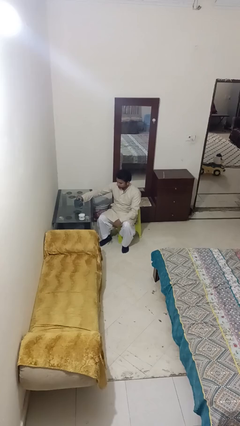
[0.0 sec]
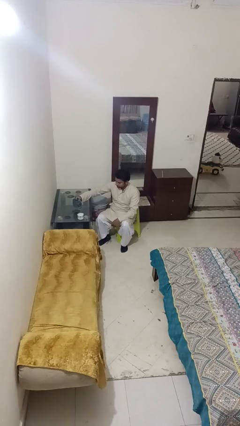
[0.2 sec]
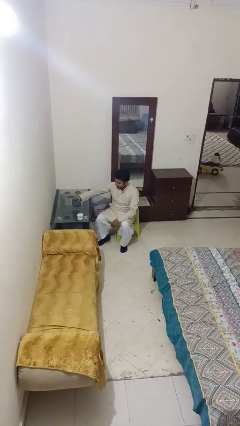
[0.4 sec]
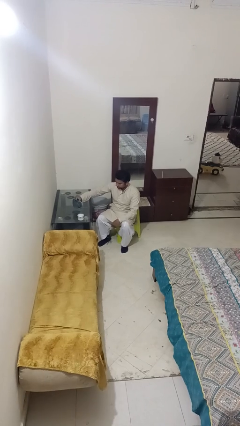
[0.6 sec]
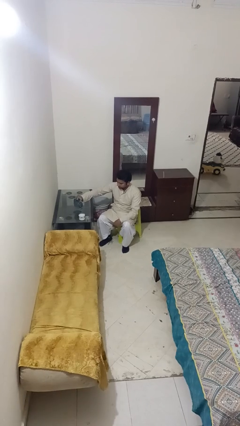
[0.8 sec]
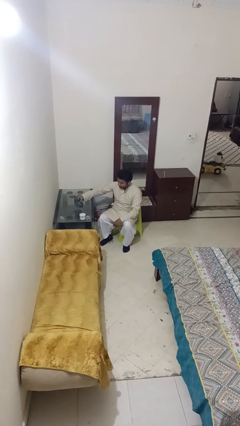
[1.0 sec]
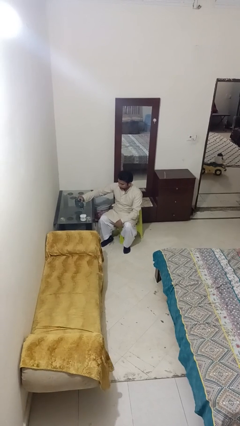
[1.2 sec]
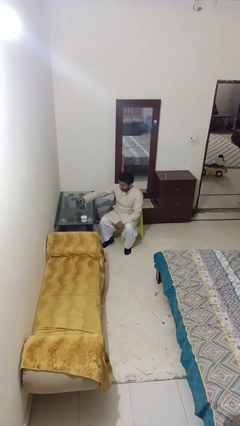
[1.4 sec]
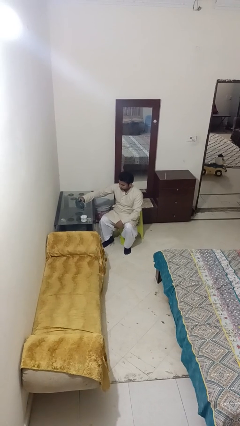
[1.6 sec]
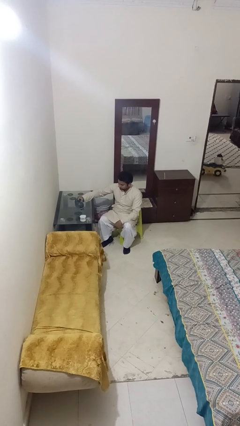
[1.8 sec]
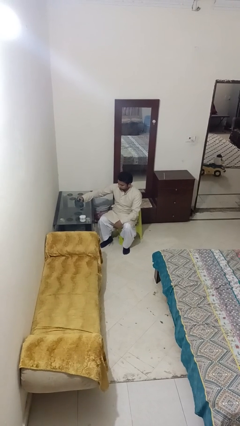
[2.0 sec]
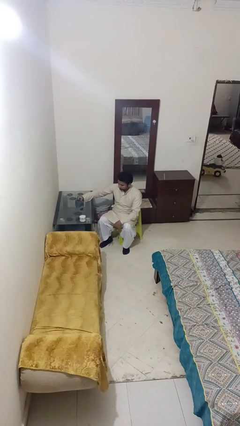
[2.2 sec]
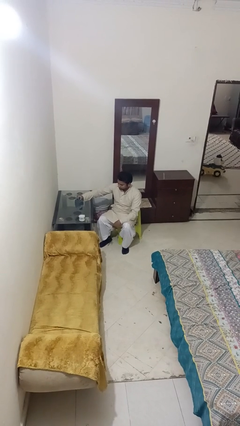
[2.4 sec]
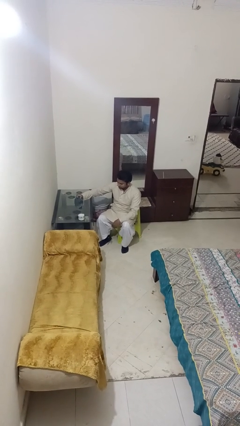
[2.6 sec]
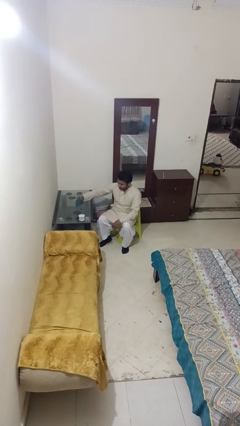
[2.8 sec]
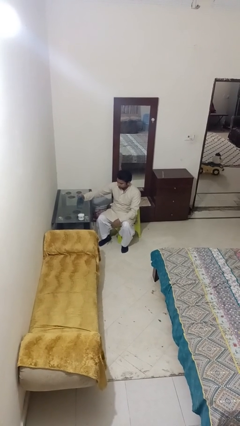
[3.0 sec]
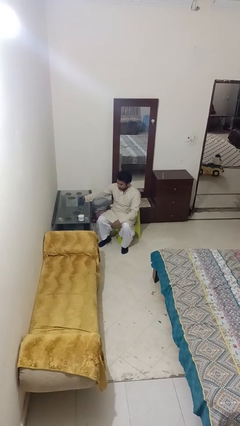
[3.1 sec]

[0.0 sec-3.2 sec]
person pours liquid into cup

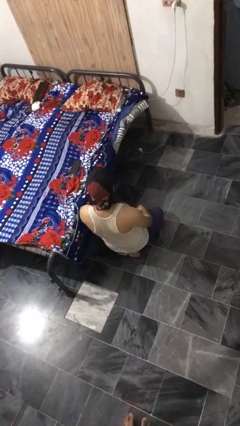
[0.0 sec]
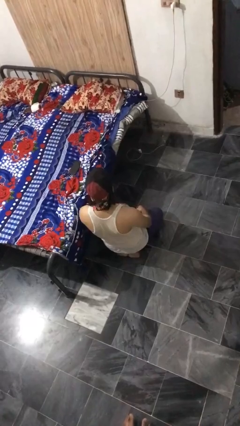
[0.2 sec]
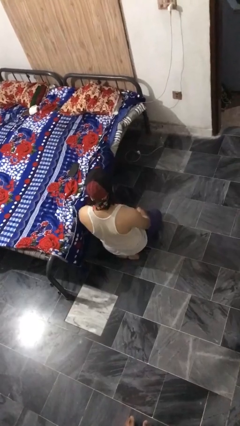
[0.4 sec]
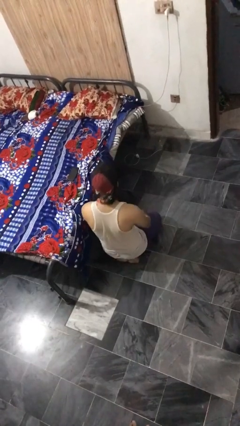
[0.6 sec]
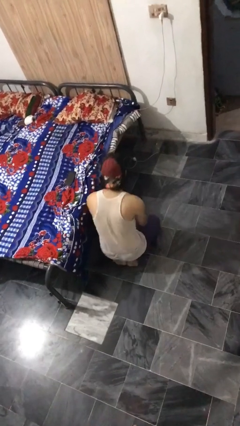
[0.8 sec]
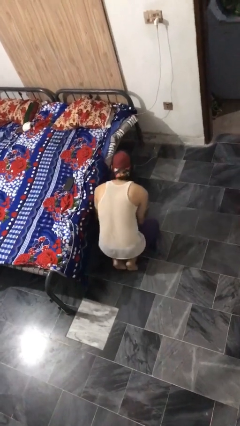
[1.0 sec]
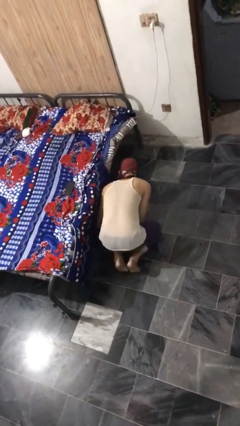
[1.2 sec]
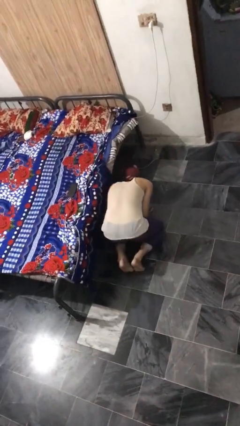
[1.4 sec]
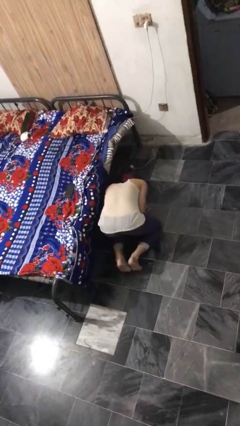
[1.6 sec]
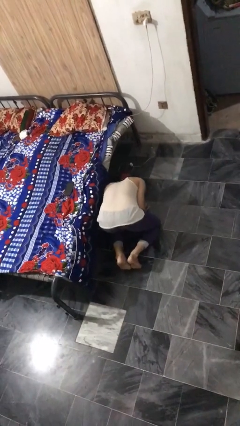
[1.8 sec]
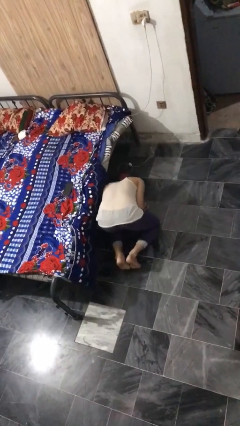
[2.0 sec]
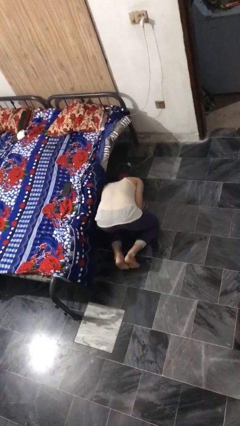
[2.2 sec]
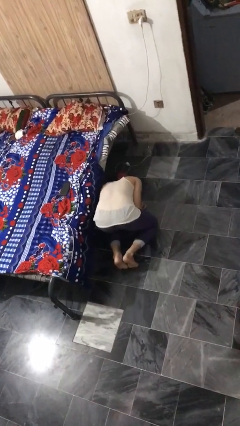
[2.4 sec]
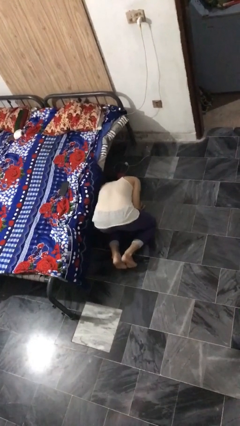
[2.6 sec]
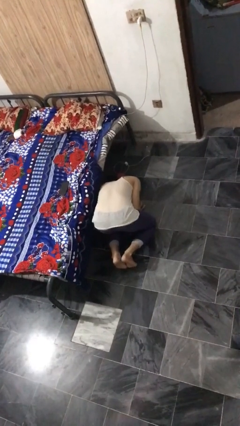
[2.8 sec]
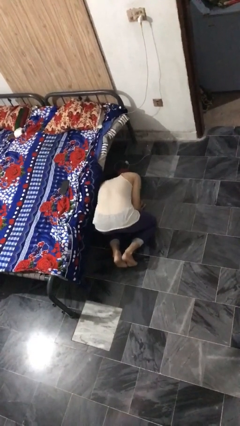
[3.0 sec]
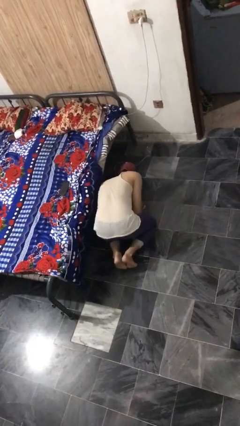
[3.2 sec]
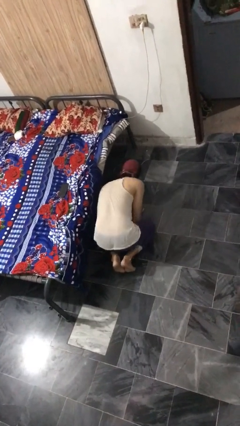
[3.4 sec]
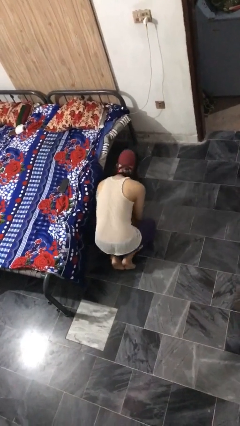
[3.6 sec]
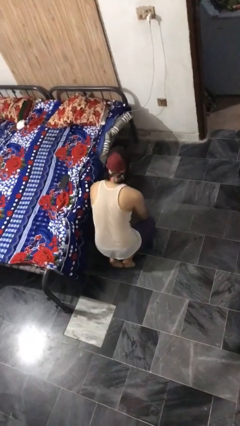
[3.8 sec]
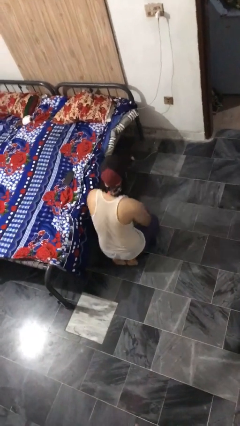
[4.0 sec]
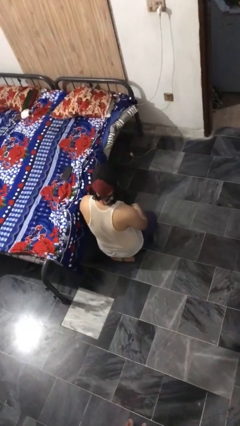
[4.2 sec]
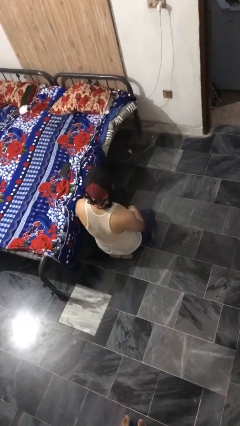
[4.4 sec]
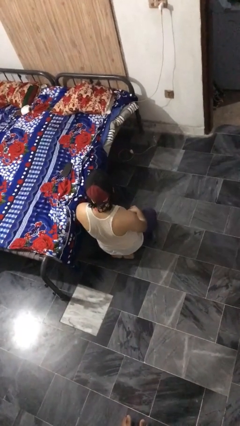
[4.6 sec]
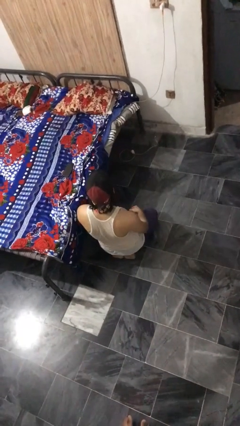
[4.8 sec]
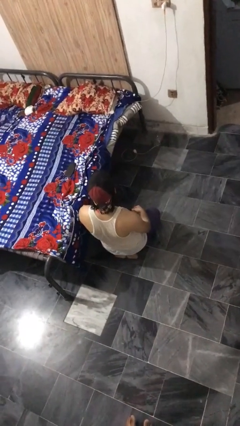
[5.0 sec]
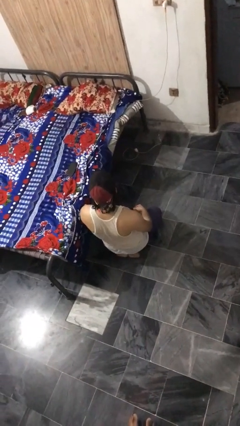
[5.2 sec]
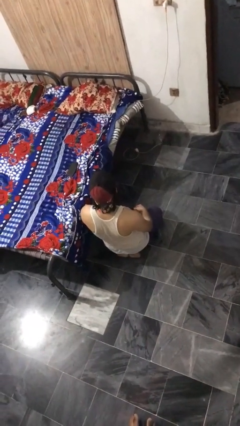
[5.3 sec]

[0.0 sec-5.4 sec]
person searches under bed

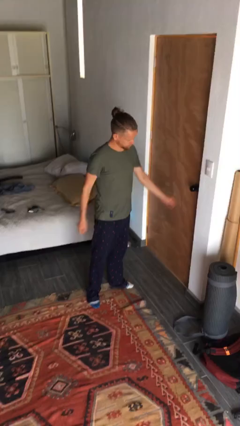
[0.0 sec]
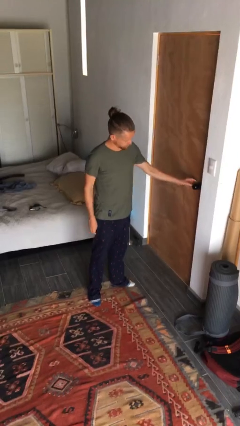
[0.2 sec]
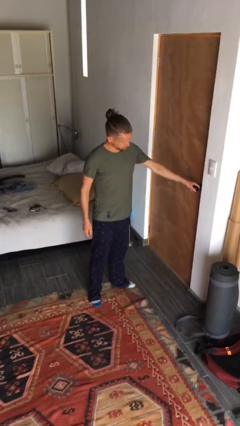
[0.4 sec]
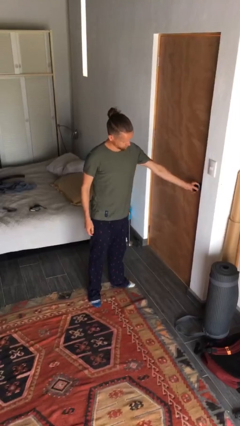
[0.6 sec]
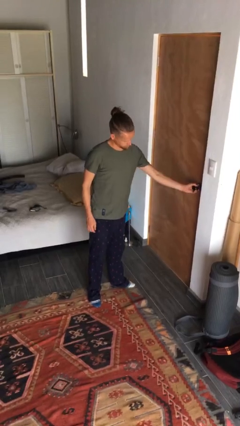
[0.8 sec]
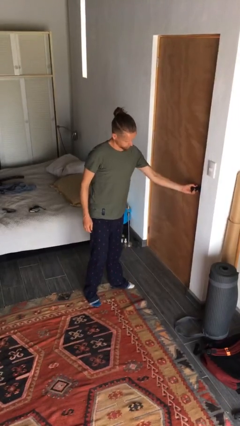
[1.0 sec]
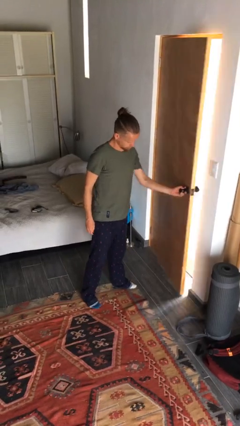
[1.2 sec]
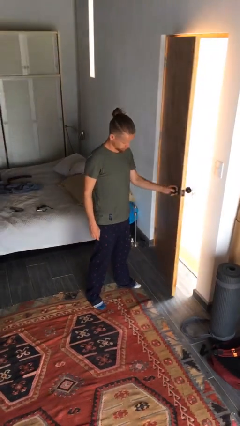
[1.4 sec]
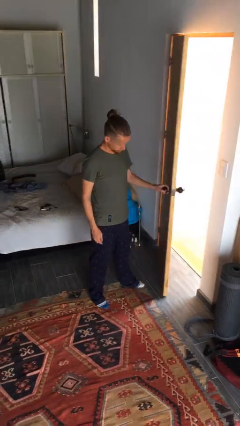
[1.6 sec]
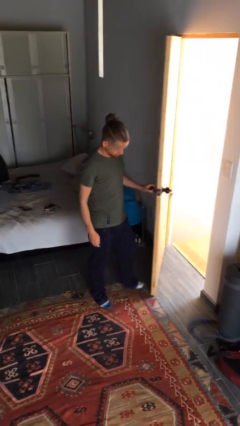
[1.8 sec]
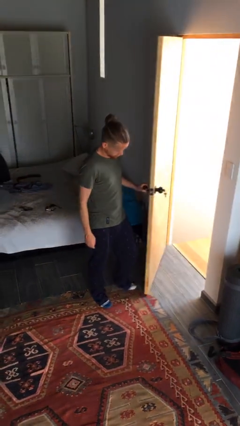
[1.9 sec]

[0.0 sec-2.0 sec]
person opens facility door

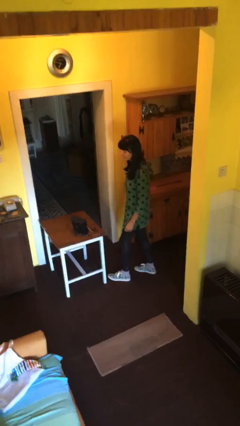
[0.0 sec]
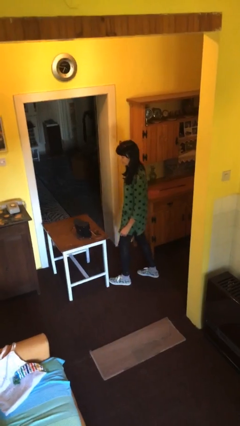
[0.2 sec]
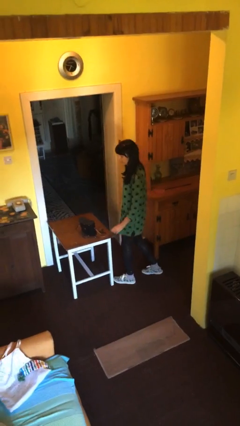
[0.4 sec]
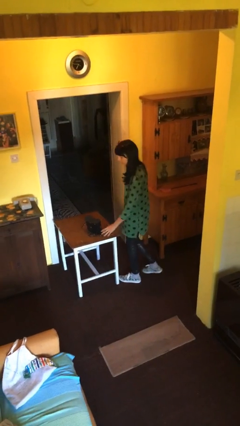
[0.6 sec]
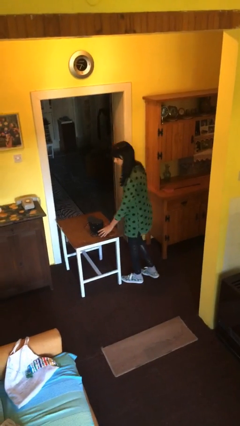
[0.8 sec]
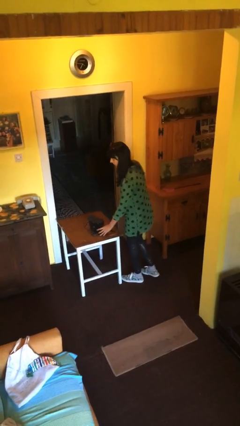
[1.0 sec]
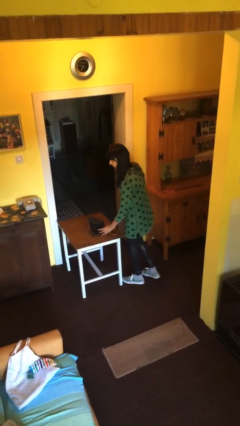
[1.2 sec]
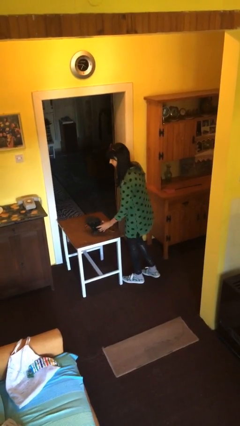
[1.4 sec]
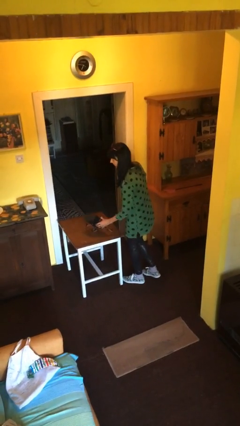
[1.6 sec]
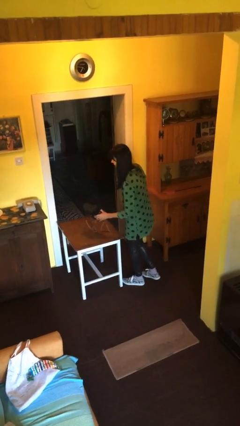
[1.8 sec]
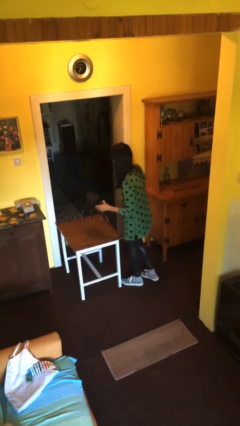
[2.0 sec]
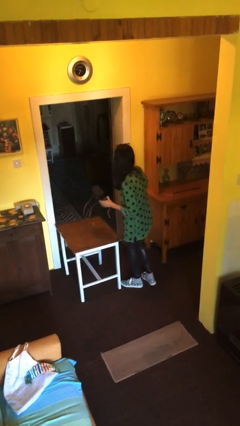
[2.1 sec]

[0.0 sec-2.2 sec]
person picks up object from table

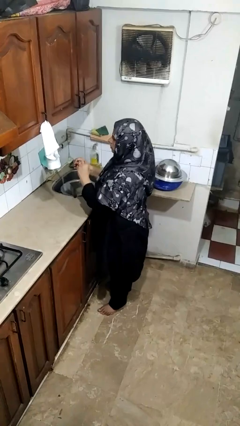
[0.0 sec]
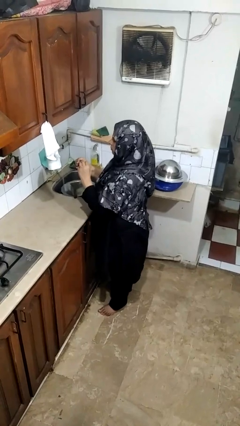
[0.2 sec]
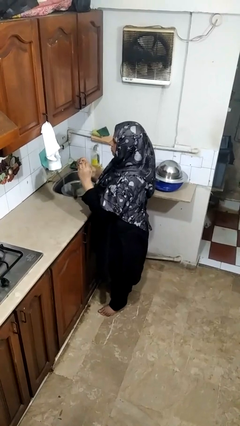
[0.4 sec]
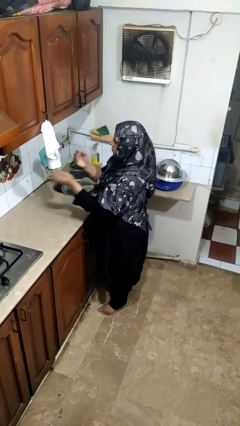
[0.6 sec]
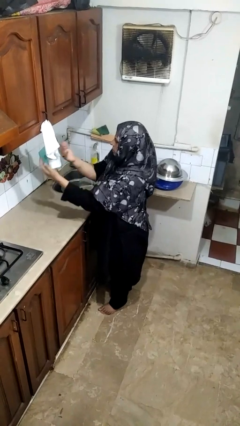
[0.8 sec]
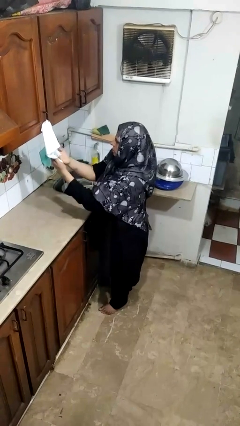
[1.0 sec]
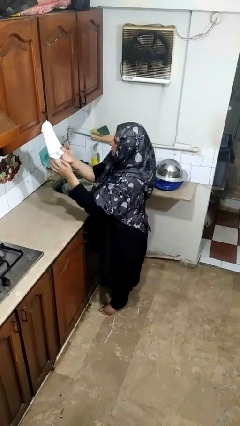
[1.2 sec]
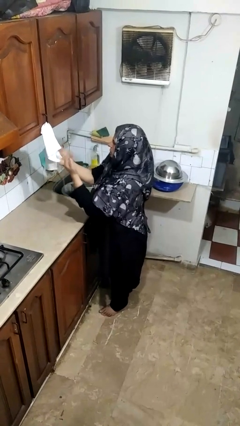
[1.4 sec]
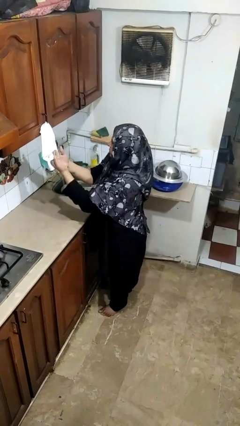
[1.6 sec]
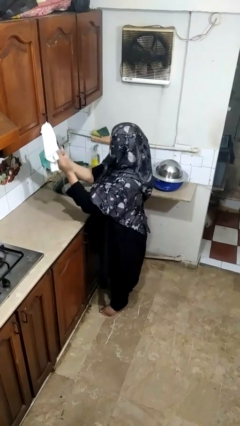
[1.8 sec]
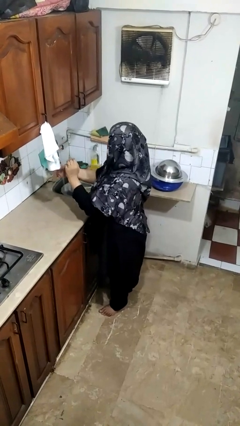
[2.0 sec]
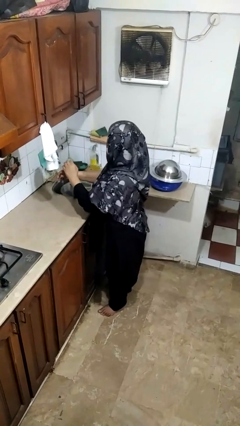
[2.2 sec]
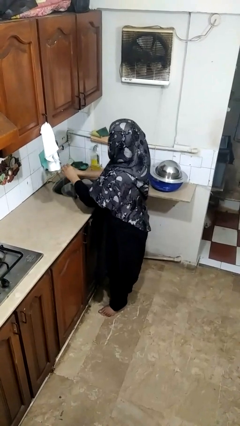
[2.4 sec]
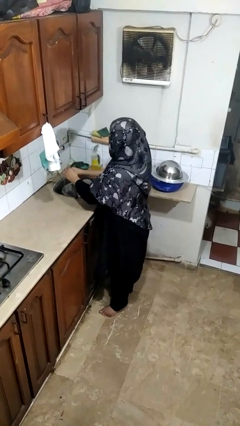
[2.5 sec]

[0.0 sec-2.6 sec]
person dries hands with towel

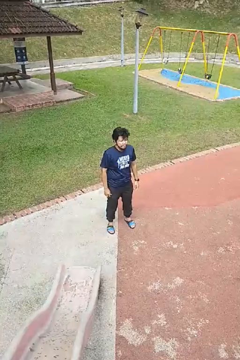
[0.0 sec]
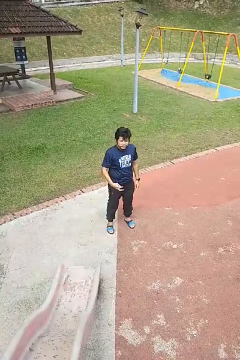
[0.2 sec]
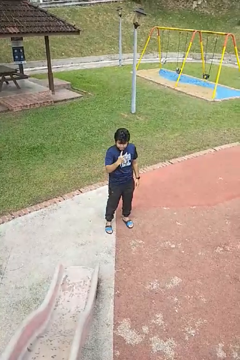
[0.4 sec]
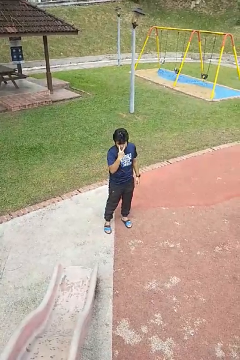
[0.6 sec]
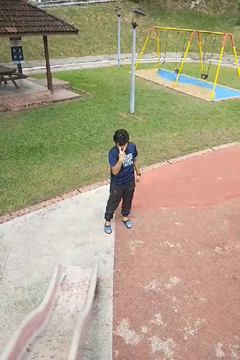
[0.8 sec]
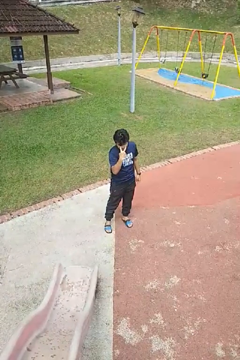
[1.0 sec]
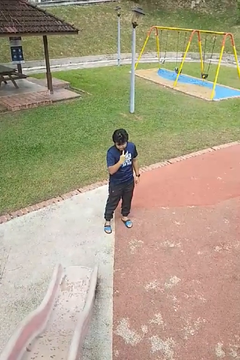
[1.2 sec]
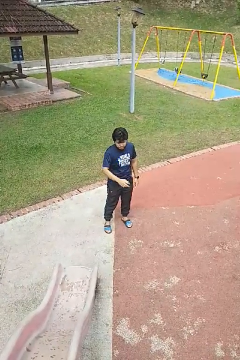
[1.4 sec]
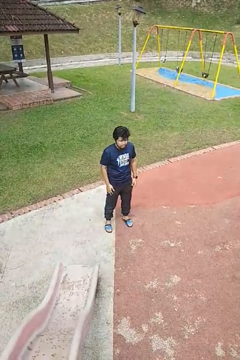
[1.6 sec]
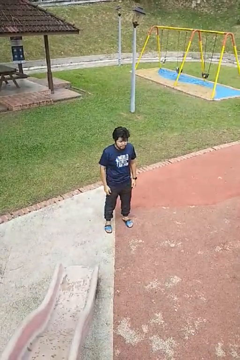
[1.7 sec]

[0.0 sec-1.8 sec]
person gestures watch closely

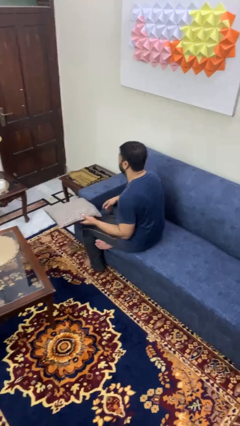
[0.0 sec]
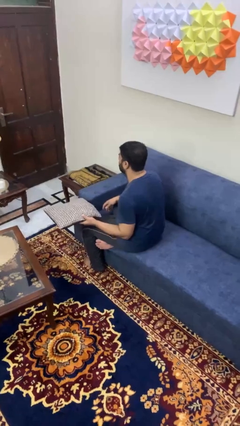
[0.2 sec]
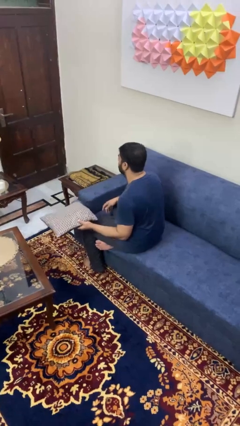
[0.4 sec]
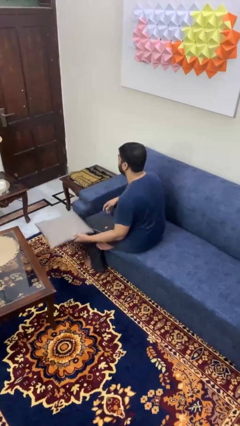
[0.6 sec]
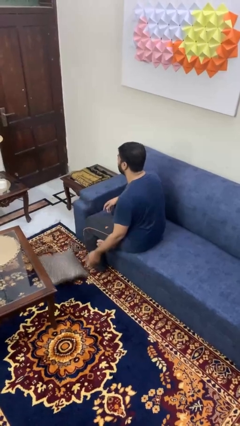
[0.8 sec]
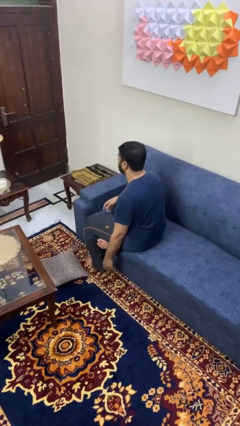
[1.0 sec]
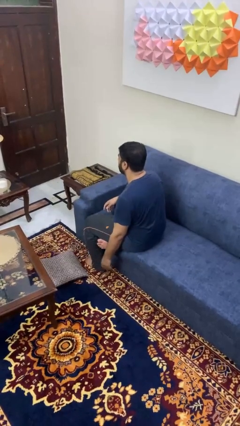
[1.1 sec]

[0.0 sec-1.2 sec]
person throws object to ground
